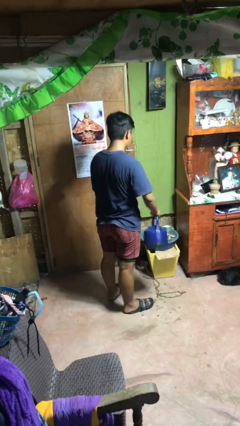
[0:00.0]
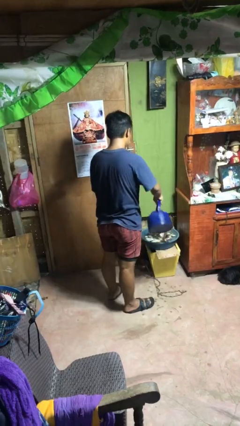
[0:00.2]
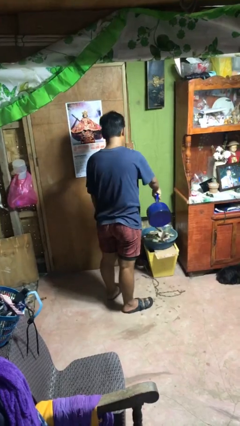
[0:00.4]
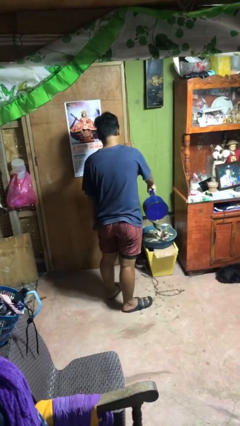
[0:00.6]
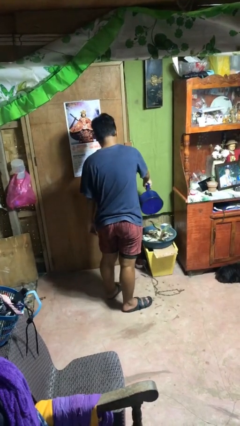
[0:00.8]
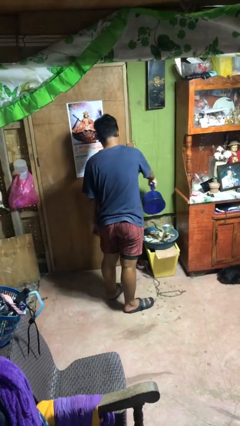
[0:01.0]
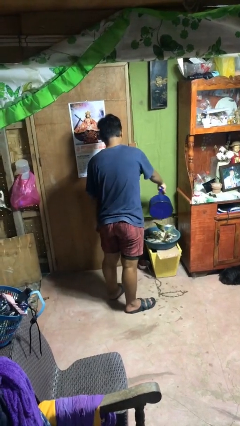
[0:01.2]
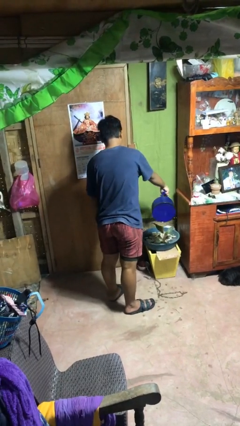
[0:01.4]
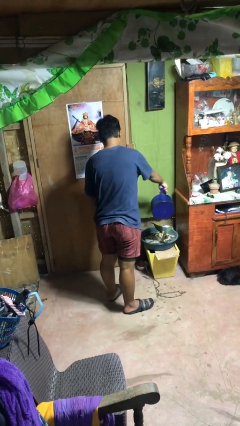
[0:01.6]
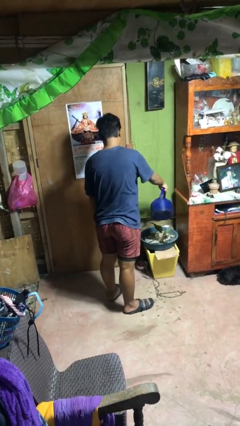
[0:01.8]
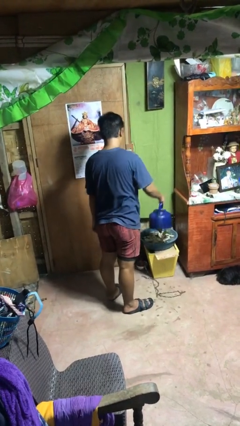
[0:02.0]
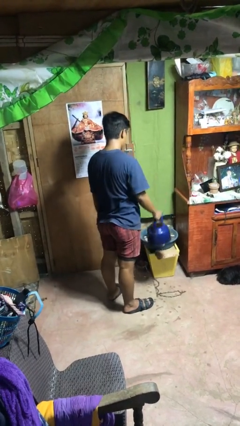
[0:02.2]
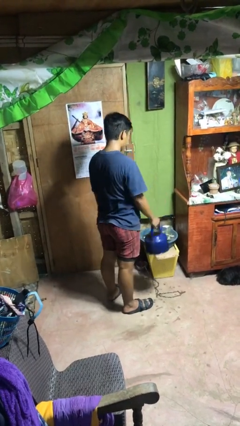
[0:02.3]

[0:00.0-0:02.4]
person waters houseplant

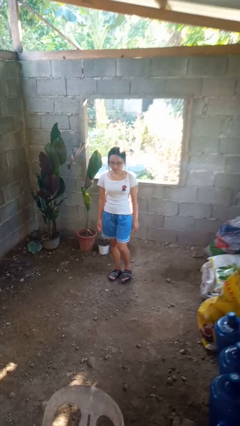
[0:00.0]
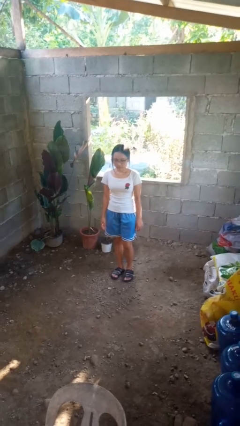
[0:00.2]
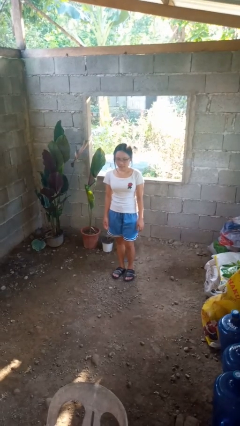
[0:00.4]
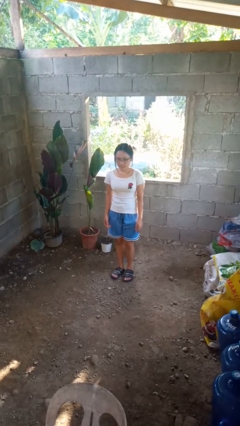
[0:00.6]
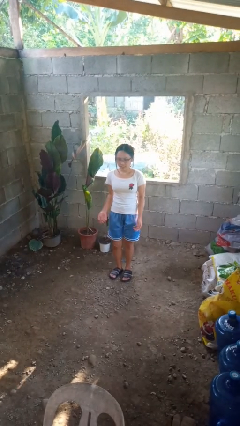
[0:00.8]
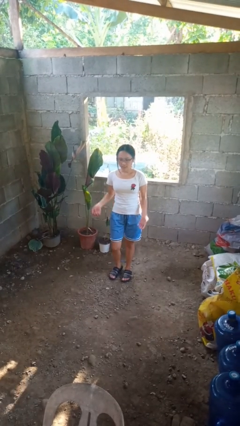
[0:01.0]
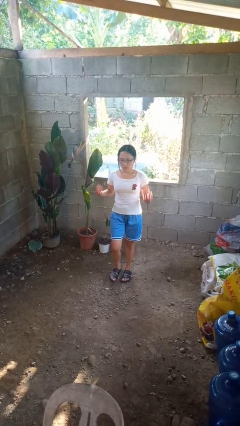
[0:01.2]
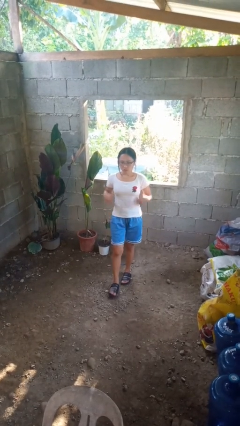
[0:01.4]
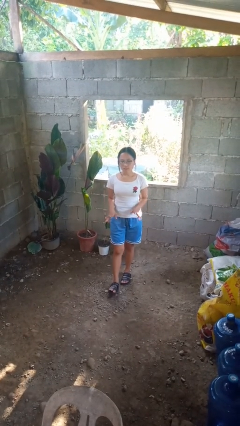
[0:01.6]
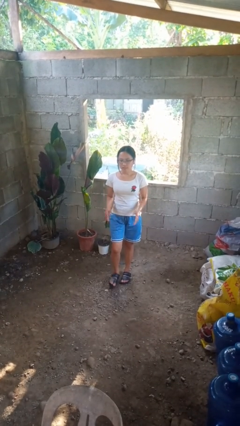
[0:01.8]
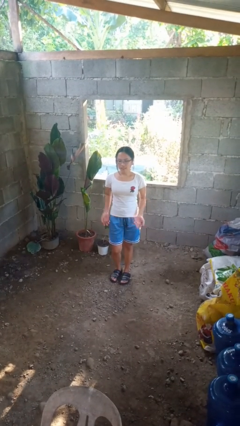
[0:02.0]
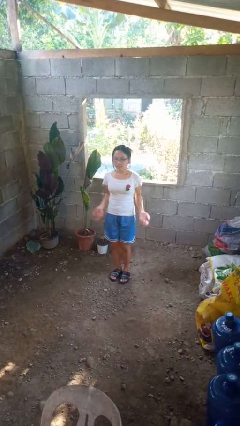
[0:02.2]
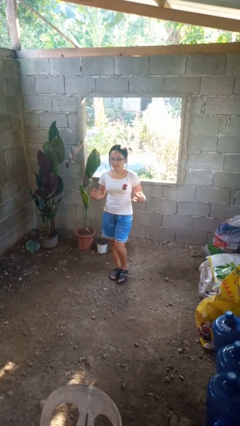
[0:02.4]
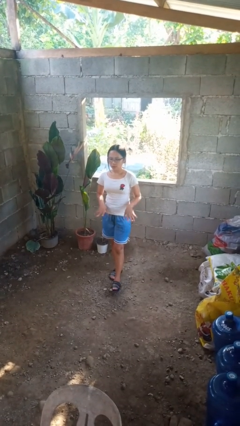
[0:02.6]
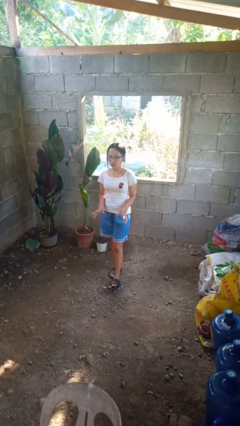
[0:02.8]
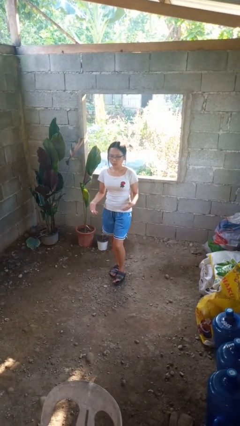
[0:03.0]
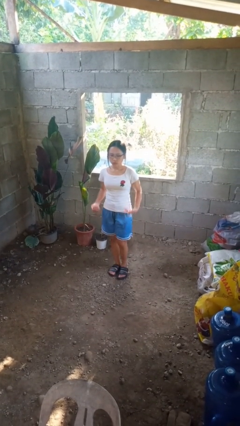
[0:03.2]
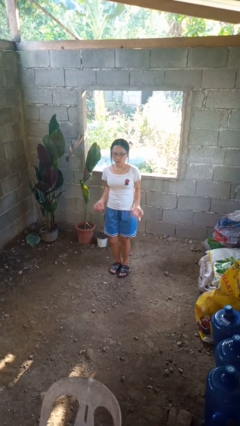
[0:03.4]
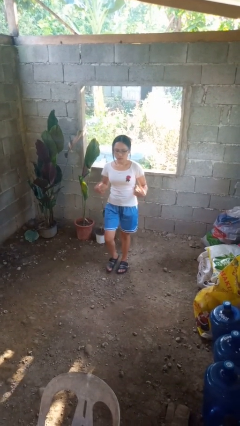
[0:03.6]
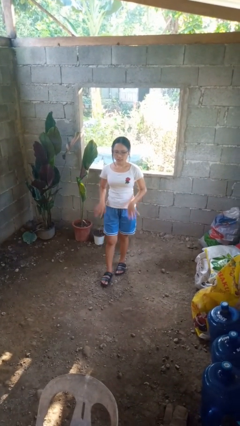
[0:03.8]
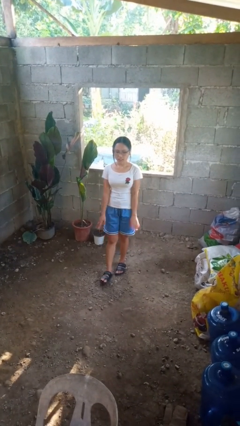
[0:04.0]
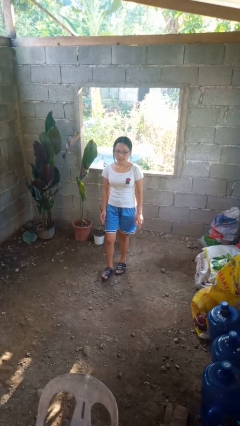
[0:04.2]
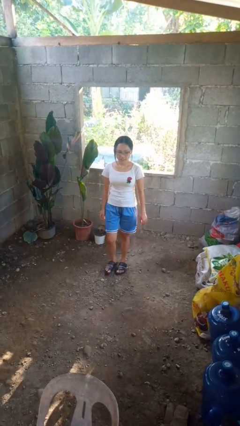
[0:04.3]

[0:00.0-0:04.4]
person dances in place

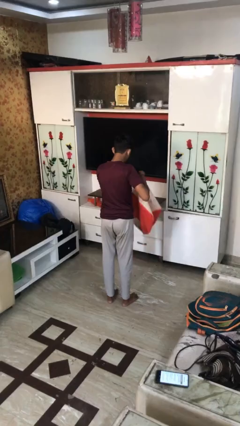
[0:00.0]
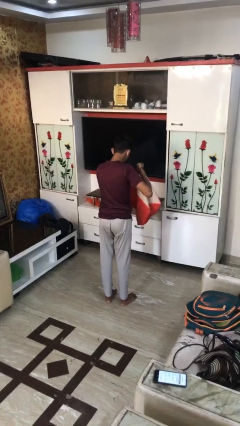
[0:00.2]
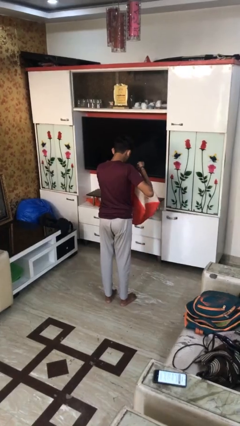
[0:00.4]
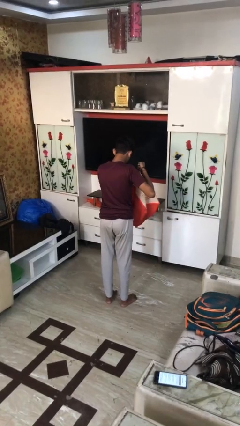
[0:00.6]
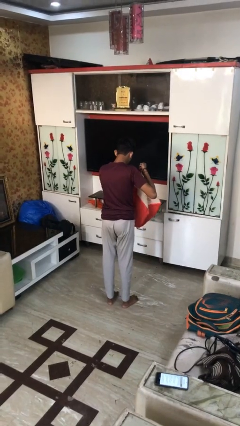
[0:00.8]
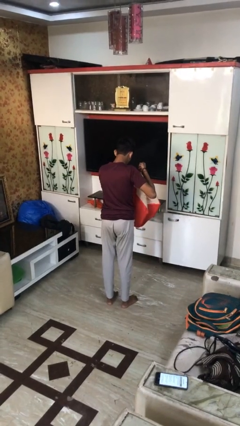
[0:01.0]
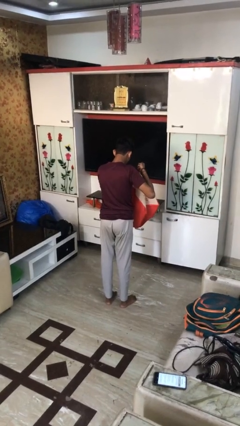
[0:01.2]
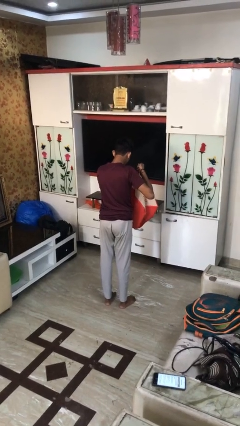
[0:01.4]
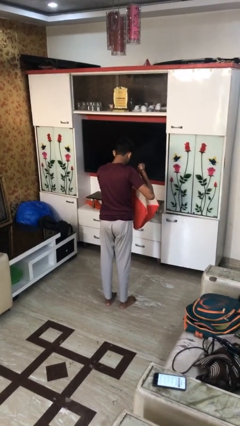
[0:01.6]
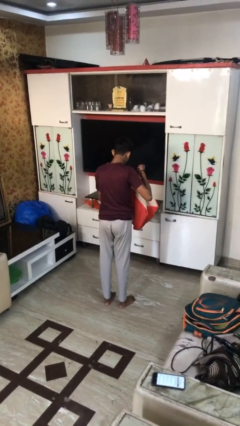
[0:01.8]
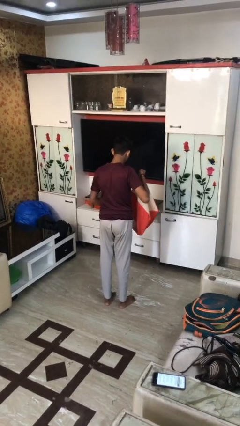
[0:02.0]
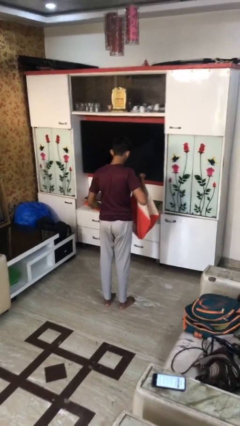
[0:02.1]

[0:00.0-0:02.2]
person searches in bag

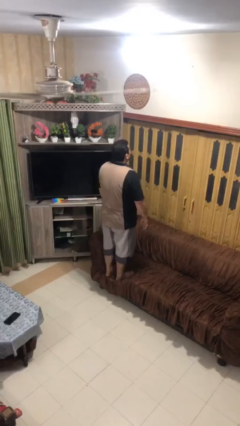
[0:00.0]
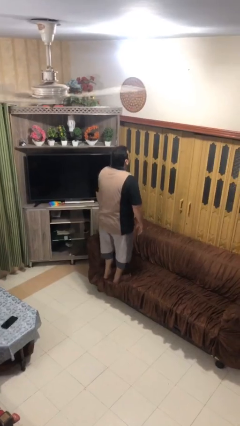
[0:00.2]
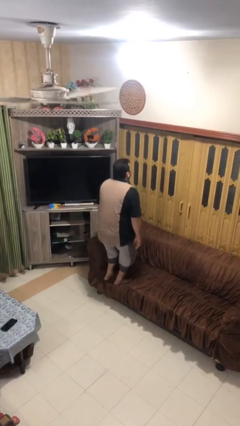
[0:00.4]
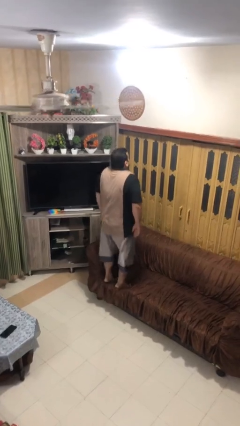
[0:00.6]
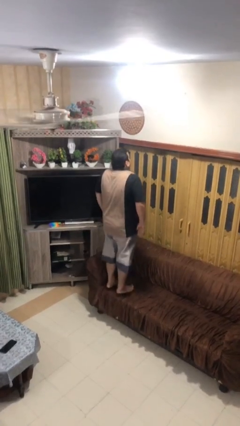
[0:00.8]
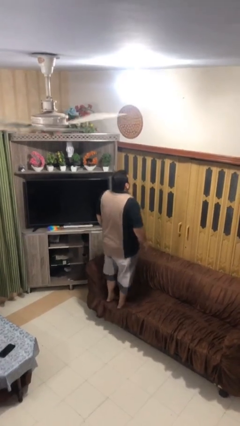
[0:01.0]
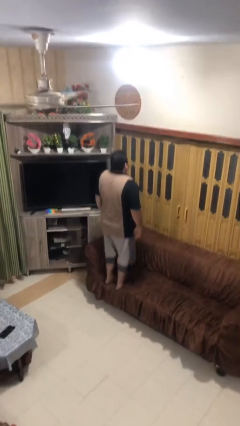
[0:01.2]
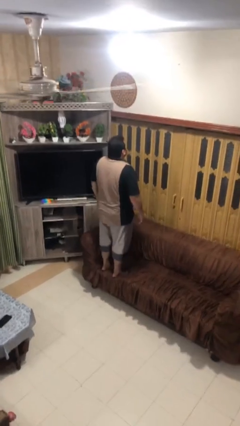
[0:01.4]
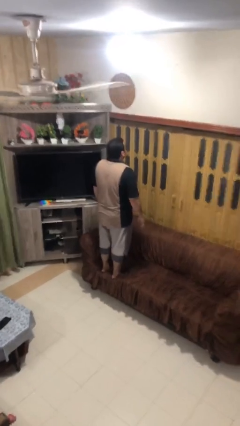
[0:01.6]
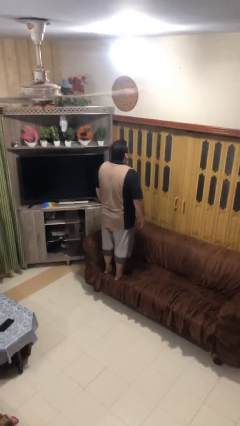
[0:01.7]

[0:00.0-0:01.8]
person jumps on couch

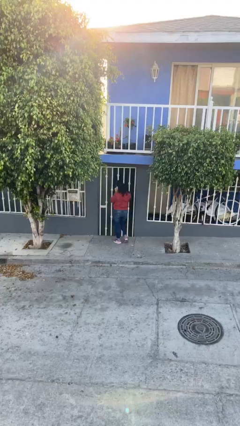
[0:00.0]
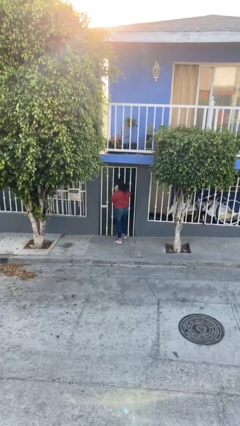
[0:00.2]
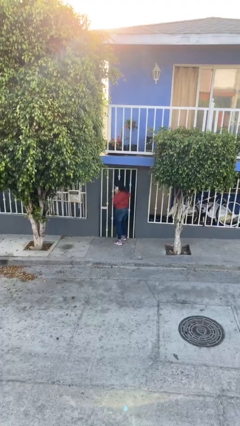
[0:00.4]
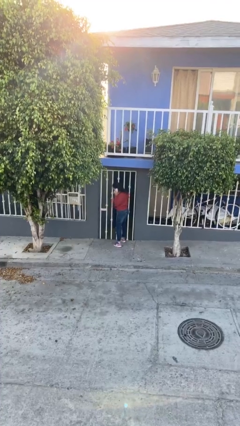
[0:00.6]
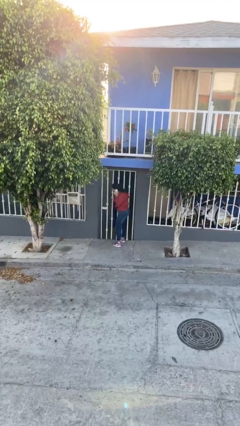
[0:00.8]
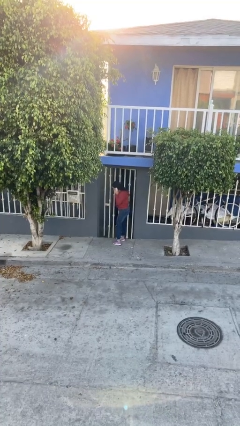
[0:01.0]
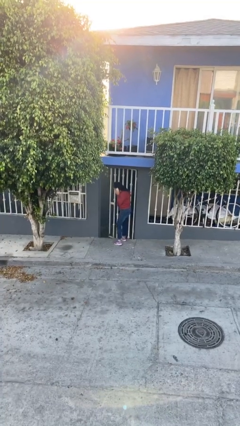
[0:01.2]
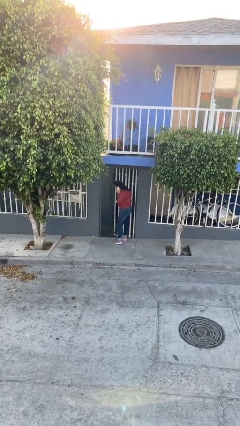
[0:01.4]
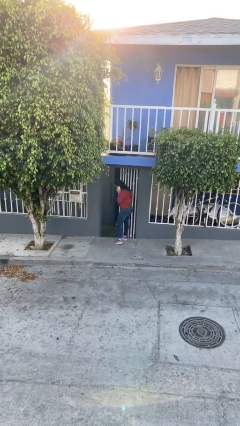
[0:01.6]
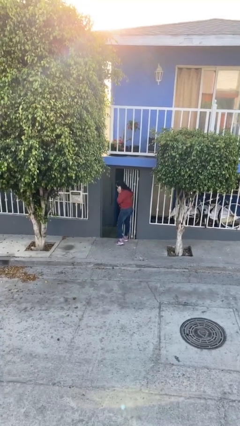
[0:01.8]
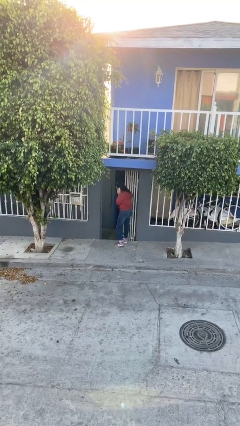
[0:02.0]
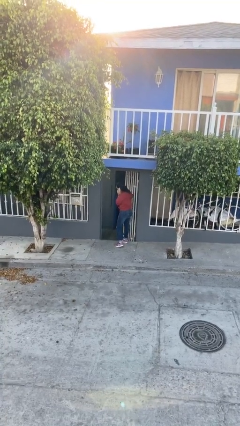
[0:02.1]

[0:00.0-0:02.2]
person opens facility door

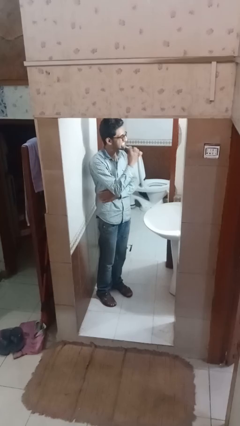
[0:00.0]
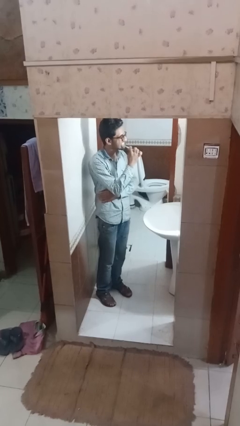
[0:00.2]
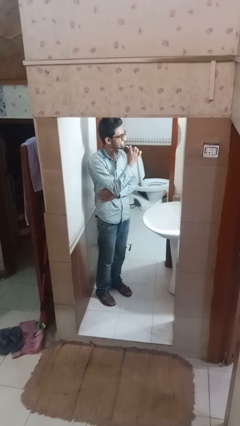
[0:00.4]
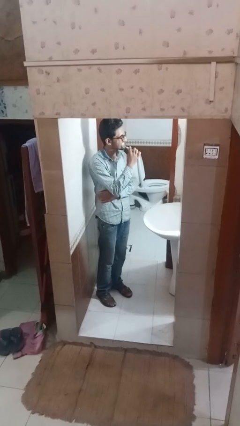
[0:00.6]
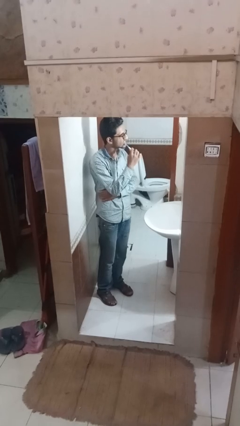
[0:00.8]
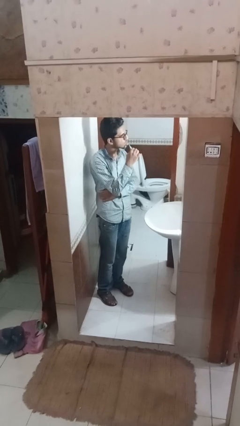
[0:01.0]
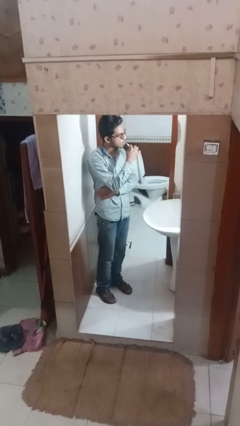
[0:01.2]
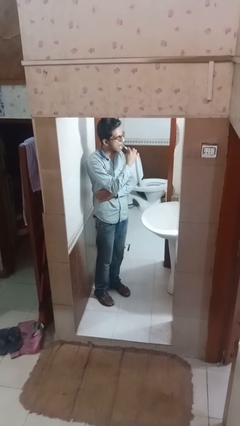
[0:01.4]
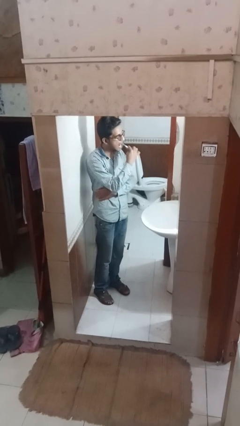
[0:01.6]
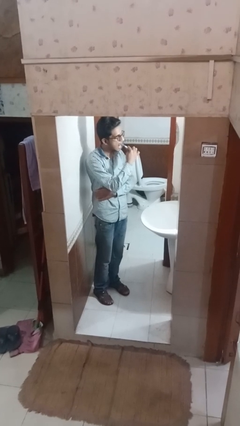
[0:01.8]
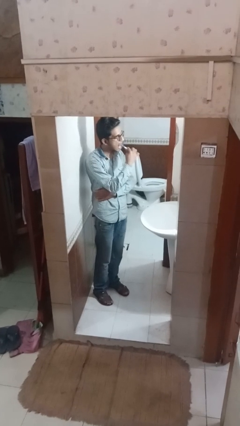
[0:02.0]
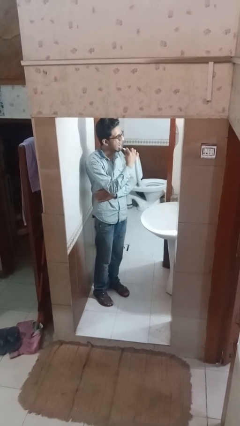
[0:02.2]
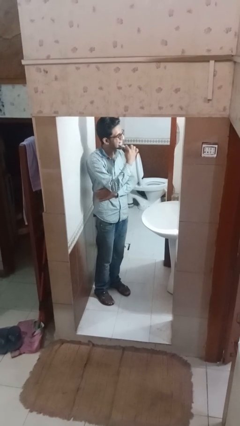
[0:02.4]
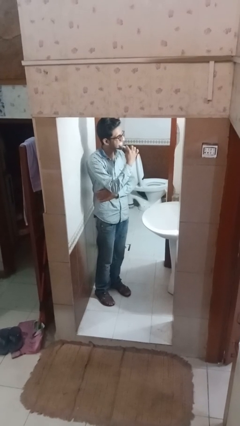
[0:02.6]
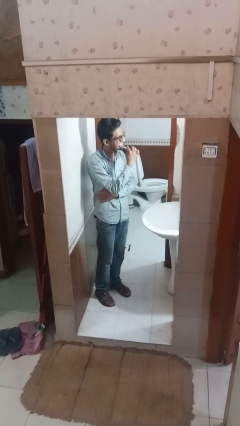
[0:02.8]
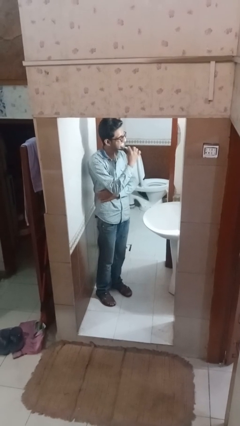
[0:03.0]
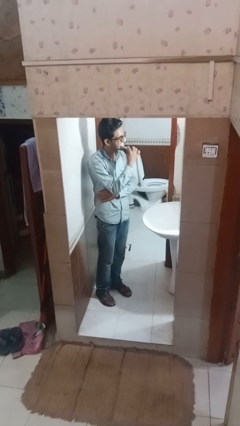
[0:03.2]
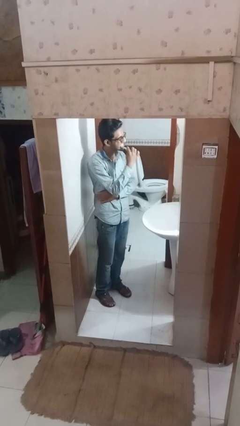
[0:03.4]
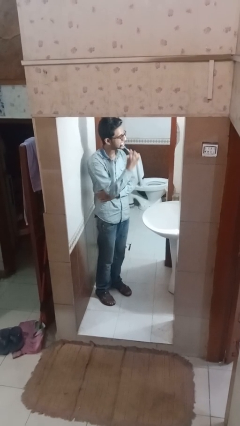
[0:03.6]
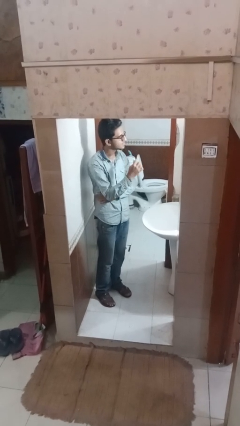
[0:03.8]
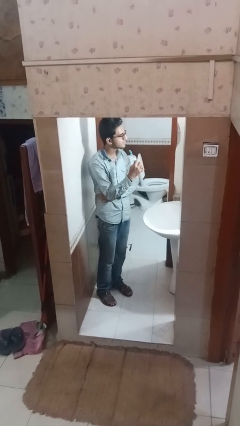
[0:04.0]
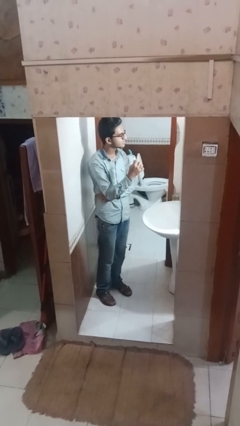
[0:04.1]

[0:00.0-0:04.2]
person brushes teeth
